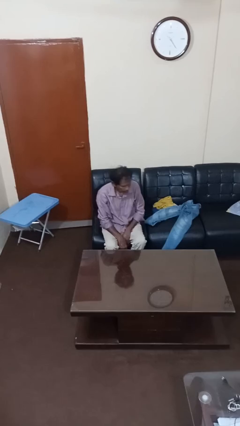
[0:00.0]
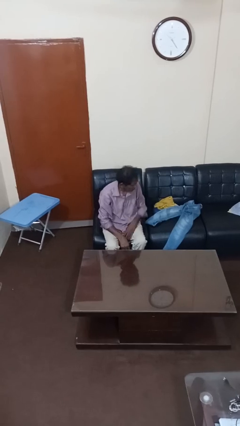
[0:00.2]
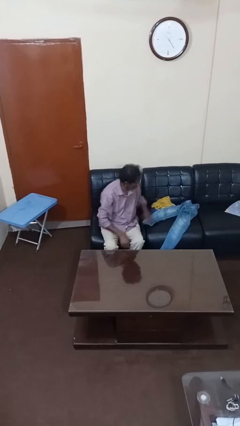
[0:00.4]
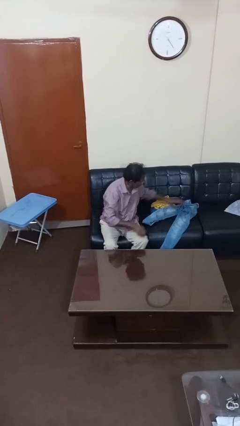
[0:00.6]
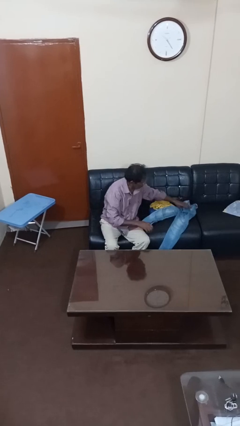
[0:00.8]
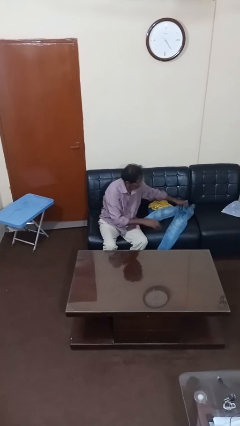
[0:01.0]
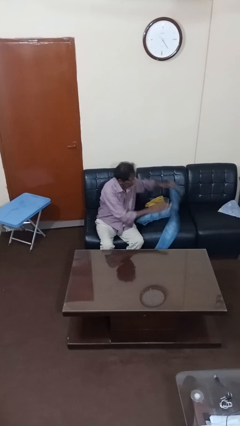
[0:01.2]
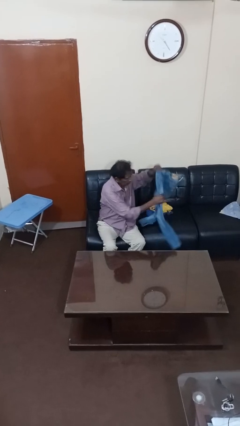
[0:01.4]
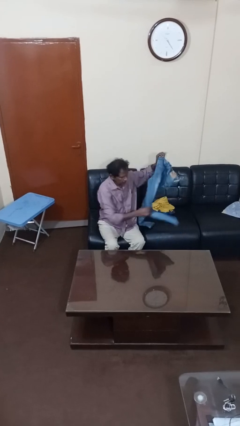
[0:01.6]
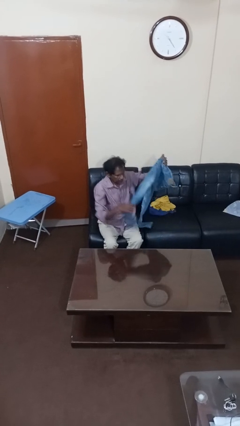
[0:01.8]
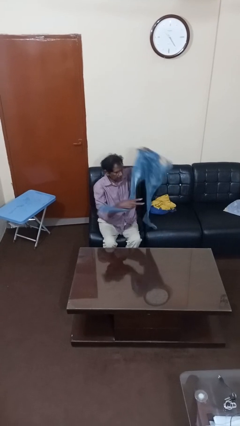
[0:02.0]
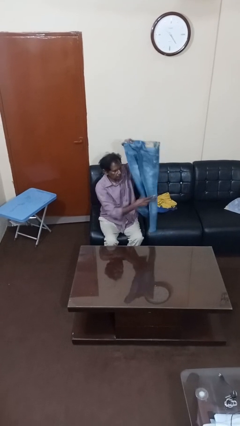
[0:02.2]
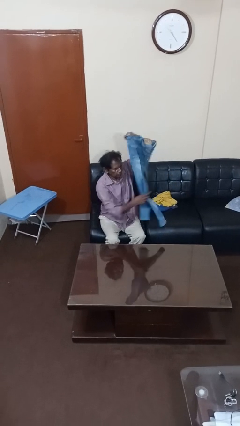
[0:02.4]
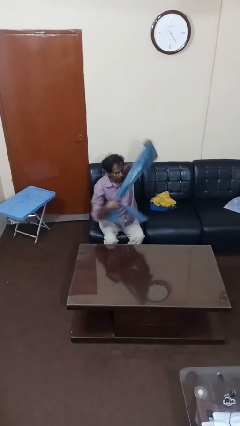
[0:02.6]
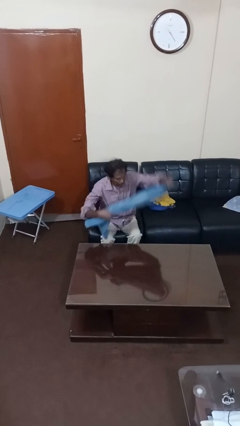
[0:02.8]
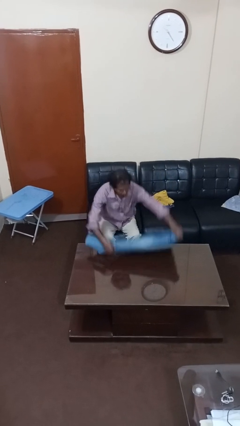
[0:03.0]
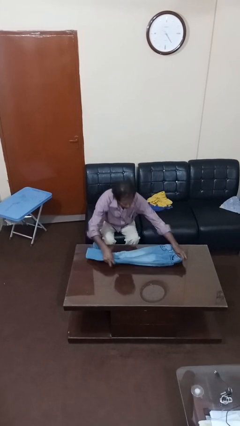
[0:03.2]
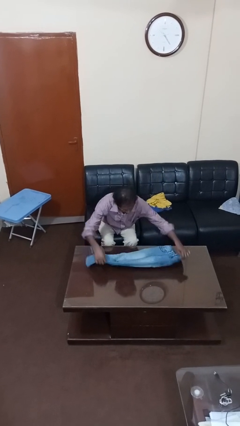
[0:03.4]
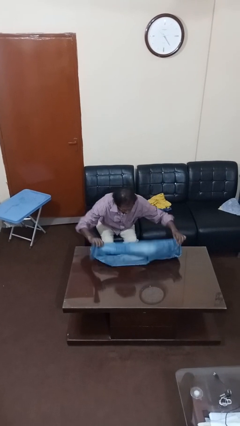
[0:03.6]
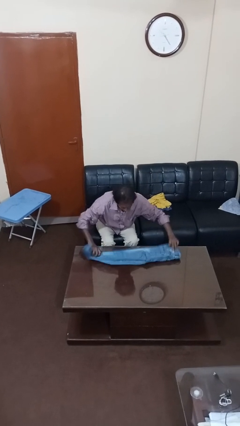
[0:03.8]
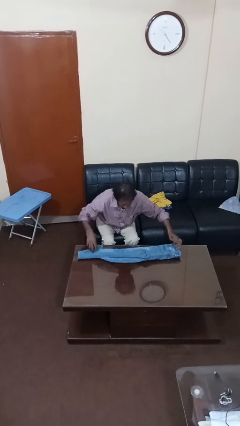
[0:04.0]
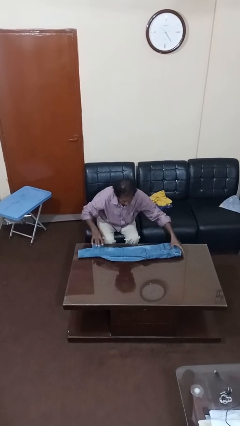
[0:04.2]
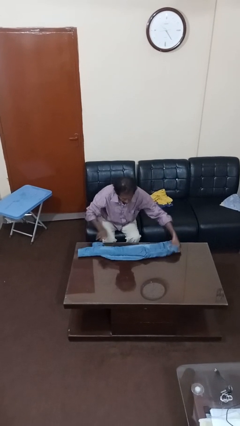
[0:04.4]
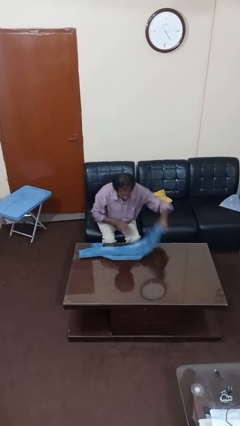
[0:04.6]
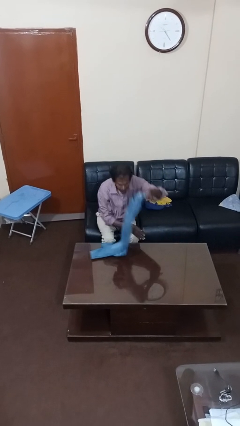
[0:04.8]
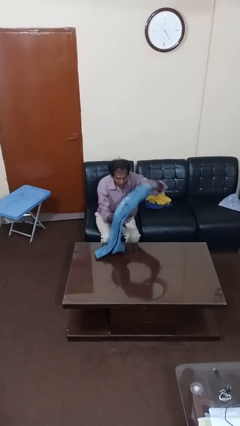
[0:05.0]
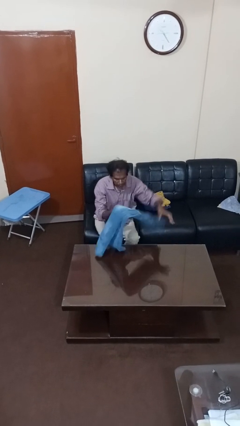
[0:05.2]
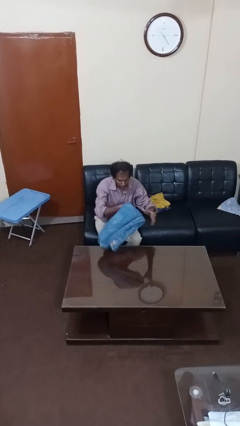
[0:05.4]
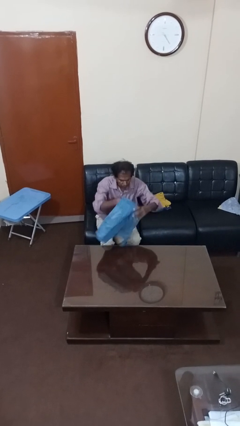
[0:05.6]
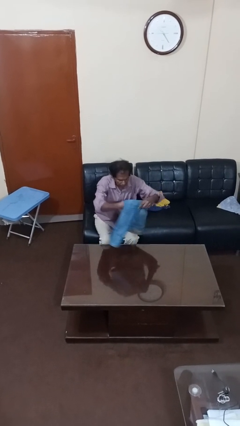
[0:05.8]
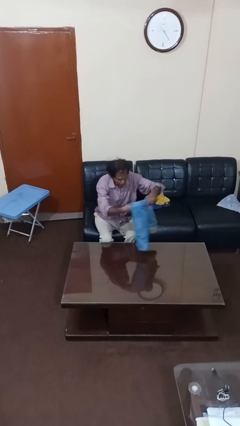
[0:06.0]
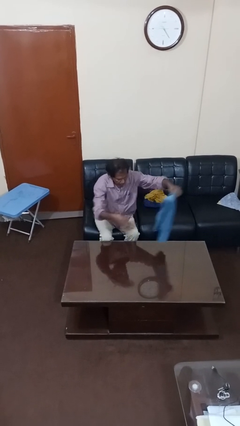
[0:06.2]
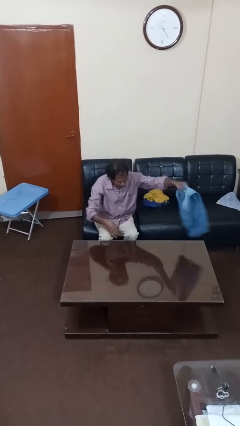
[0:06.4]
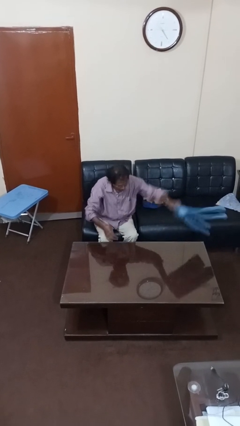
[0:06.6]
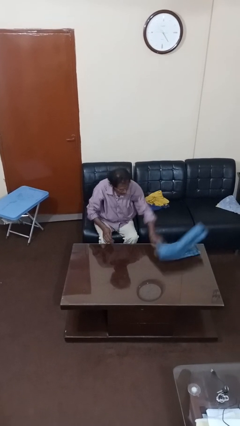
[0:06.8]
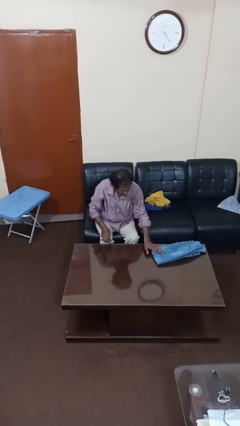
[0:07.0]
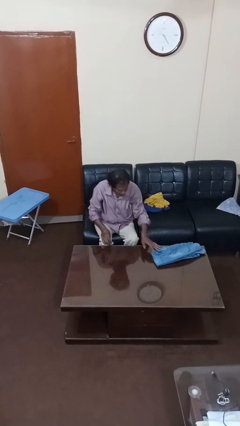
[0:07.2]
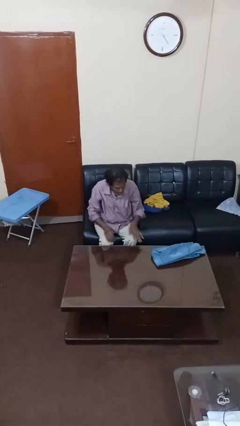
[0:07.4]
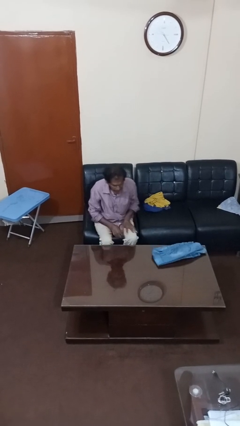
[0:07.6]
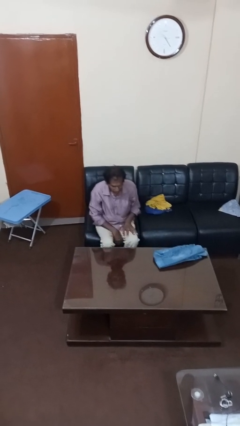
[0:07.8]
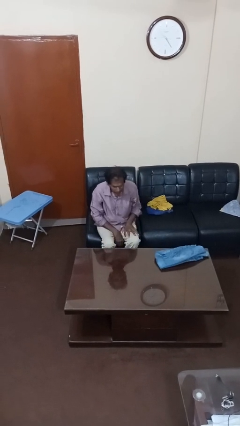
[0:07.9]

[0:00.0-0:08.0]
person folds pants

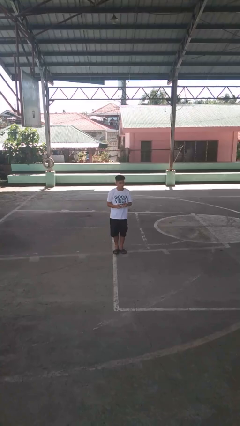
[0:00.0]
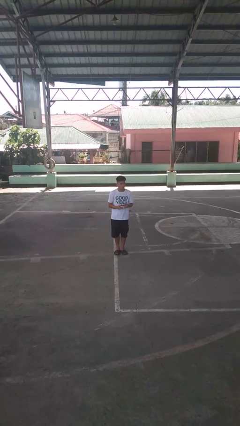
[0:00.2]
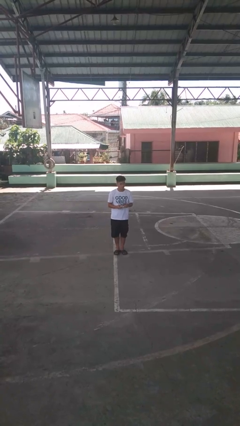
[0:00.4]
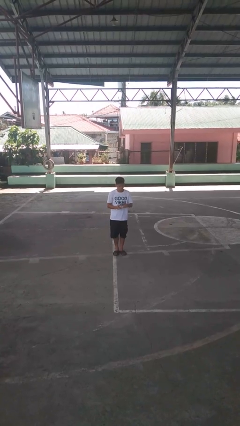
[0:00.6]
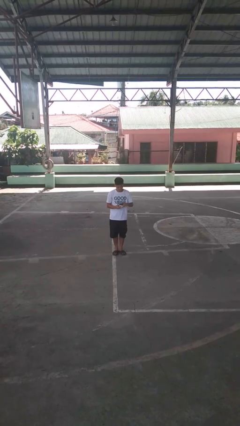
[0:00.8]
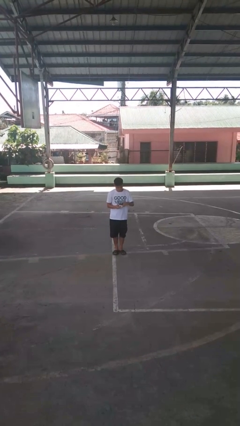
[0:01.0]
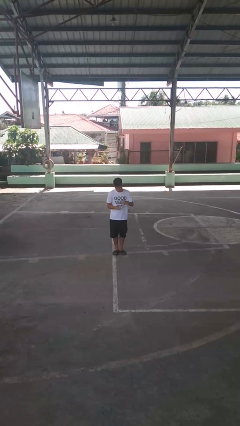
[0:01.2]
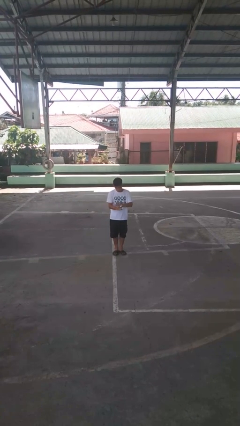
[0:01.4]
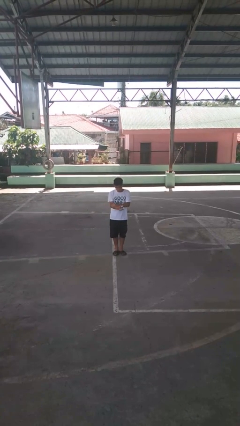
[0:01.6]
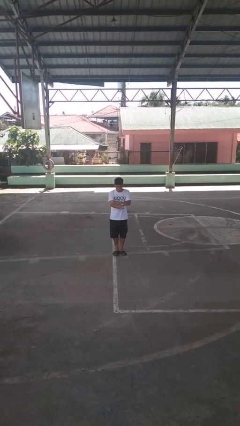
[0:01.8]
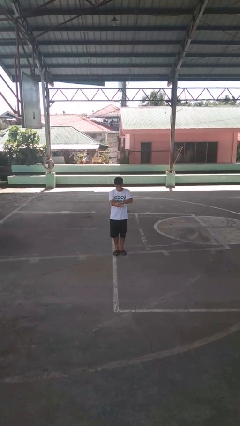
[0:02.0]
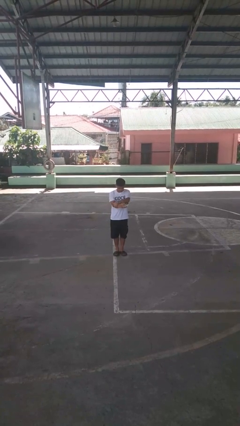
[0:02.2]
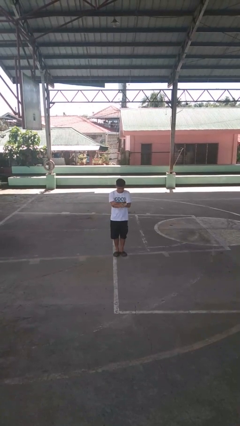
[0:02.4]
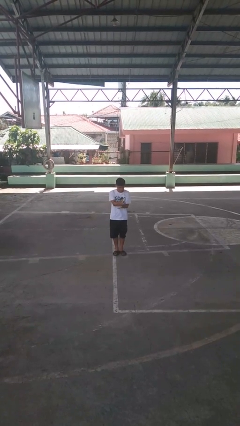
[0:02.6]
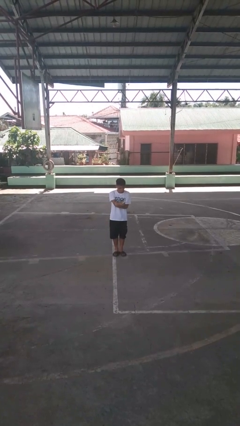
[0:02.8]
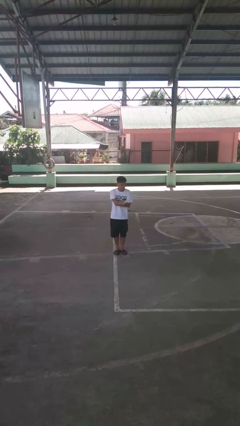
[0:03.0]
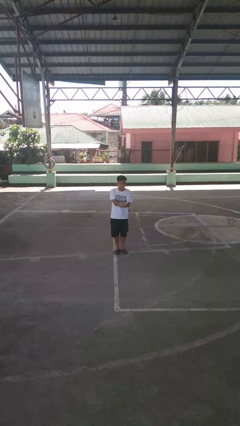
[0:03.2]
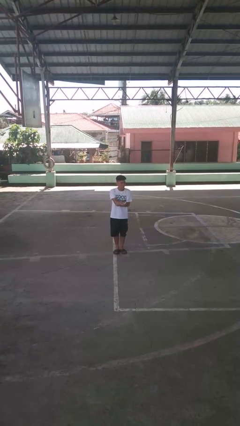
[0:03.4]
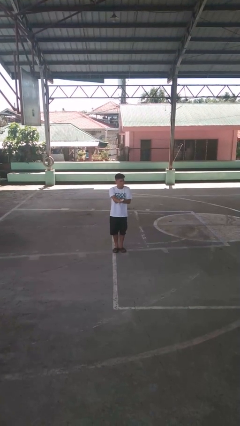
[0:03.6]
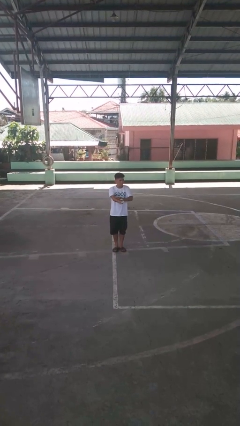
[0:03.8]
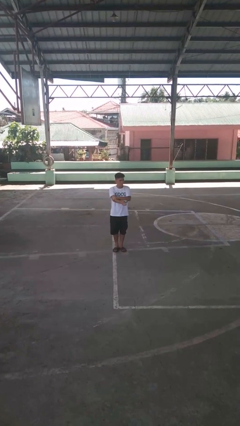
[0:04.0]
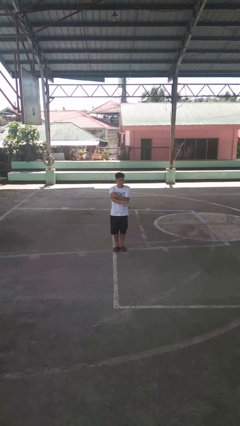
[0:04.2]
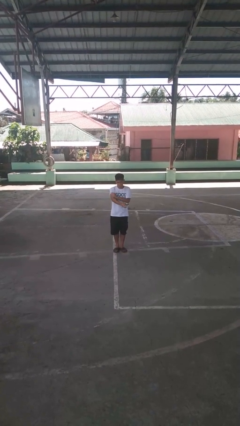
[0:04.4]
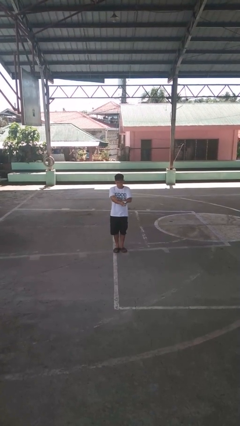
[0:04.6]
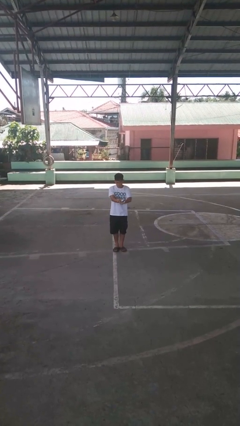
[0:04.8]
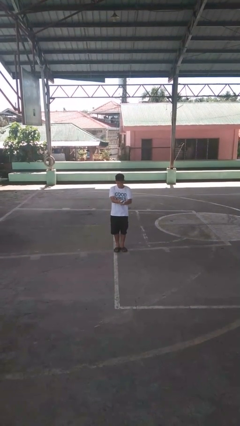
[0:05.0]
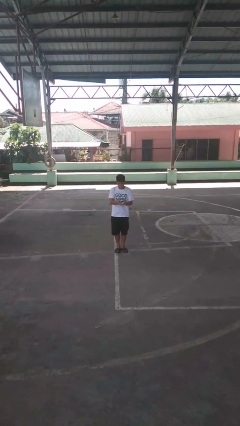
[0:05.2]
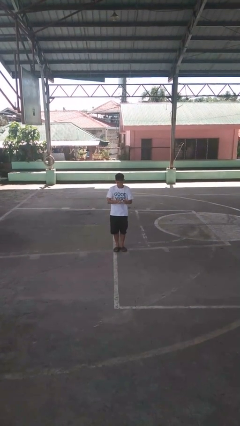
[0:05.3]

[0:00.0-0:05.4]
person applies sunscreen

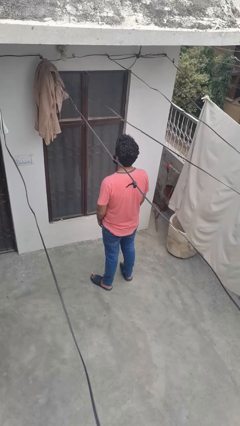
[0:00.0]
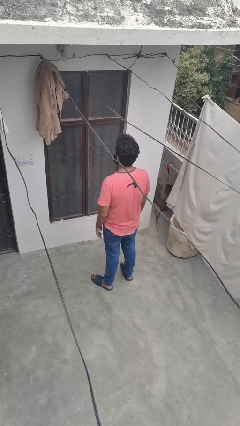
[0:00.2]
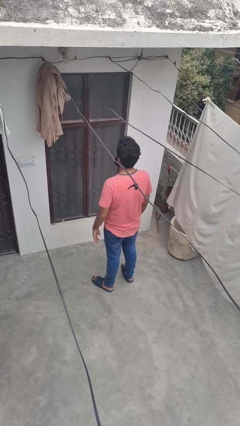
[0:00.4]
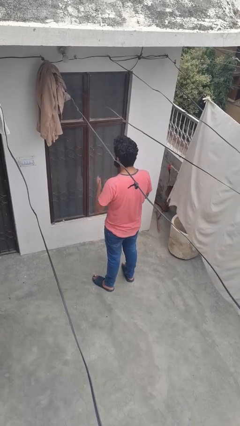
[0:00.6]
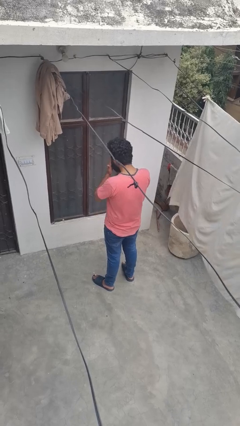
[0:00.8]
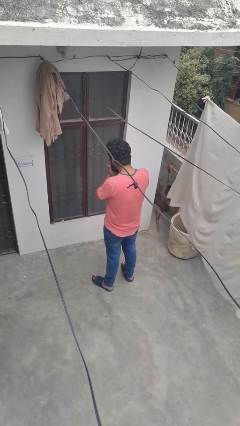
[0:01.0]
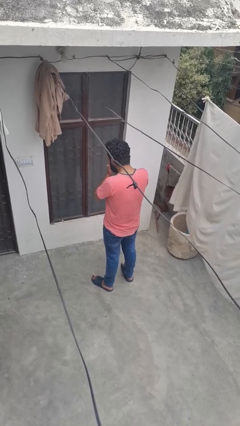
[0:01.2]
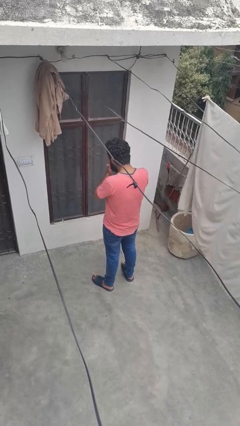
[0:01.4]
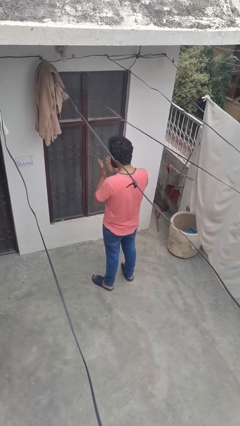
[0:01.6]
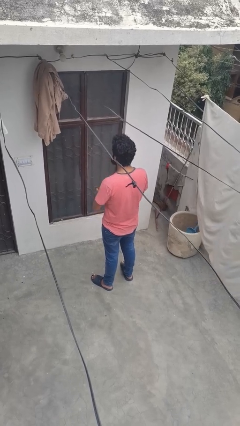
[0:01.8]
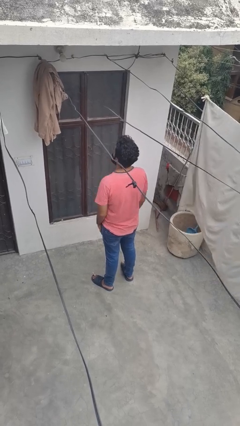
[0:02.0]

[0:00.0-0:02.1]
person covers face with hands

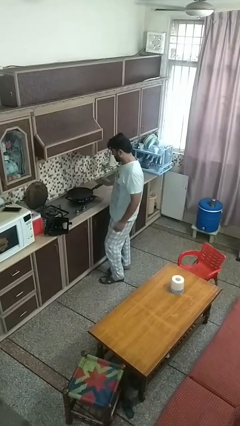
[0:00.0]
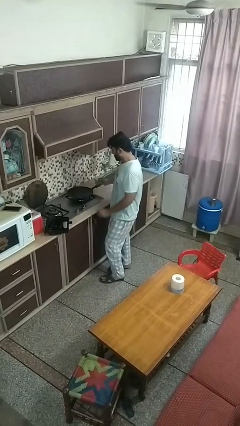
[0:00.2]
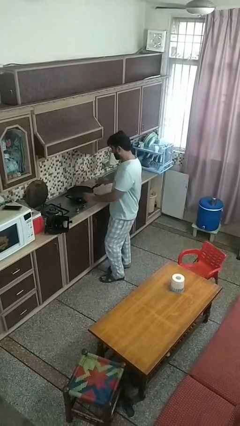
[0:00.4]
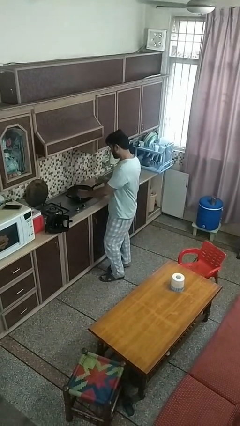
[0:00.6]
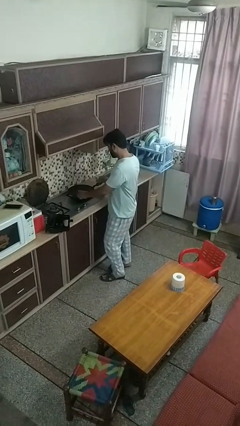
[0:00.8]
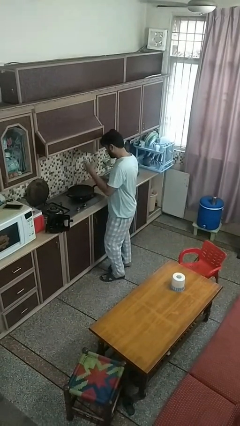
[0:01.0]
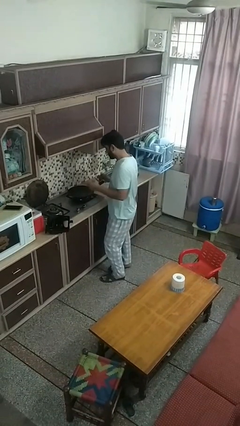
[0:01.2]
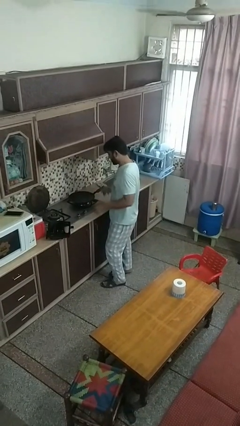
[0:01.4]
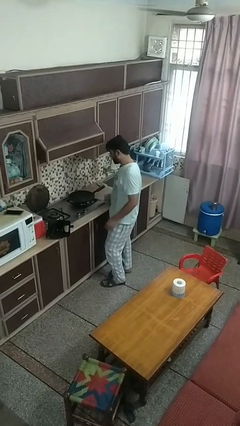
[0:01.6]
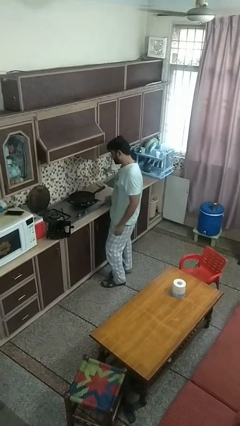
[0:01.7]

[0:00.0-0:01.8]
person burns hand

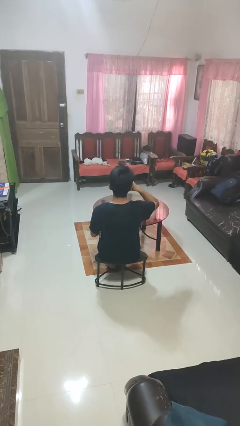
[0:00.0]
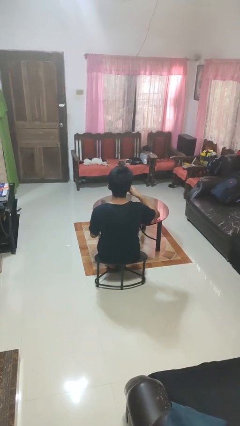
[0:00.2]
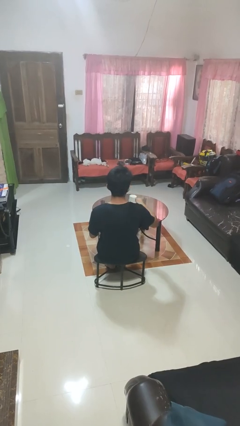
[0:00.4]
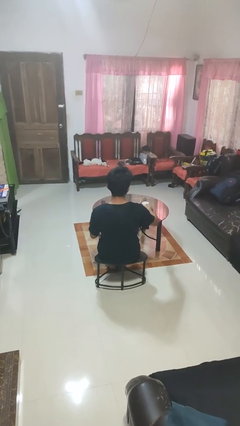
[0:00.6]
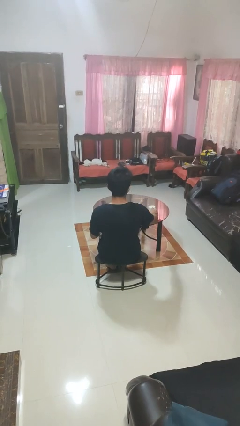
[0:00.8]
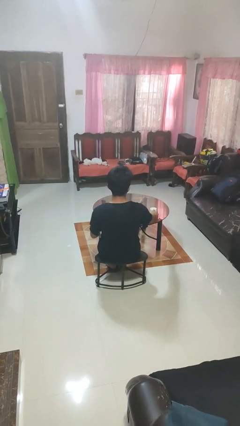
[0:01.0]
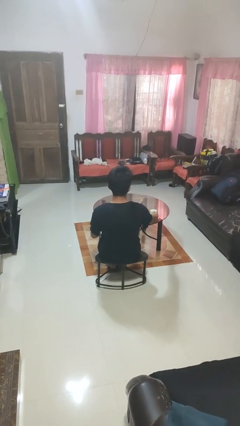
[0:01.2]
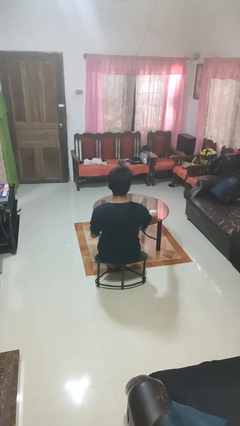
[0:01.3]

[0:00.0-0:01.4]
person puts down object on table
